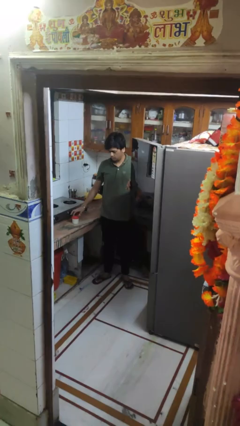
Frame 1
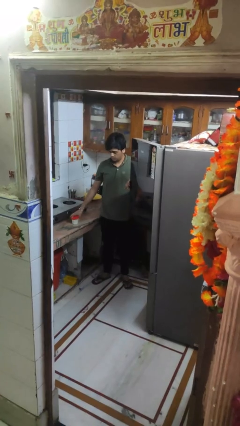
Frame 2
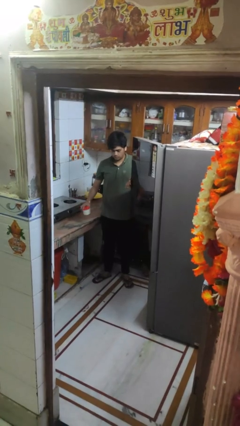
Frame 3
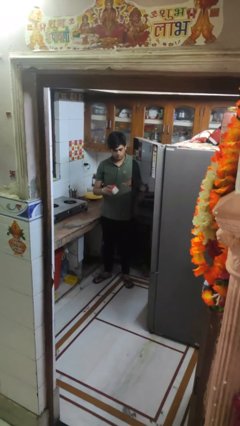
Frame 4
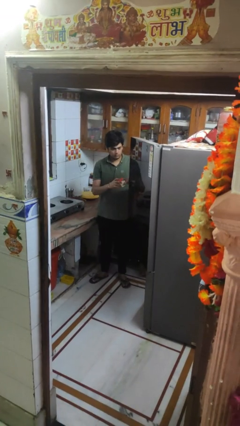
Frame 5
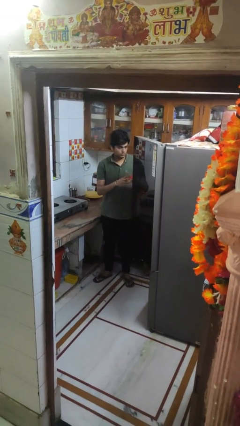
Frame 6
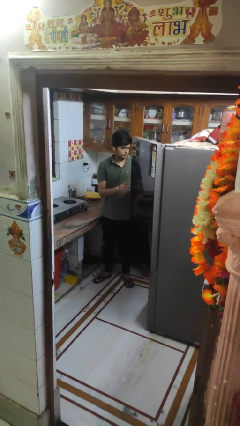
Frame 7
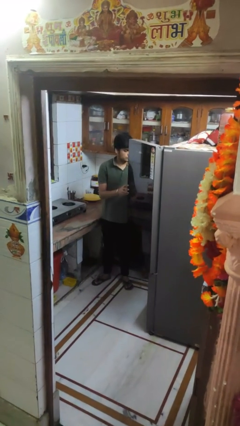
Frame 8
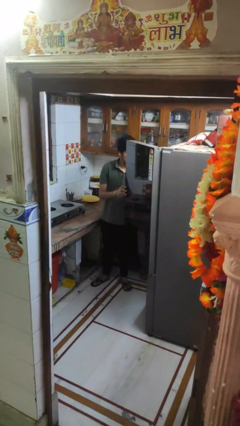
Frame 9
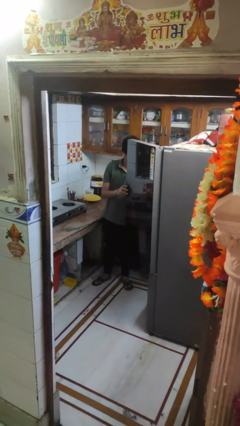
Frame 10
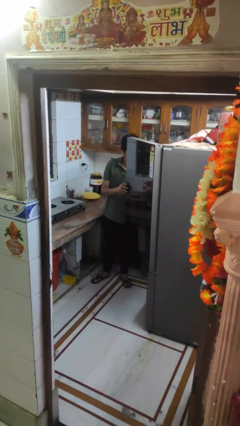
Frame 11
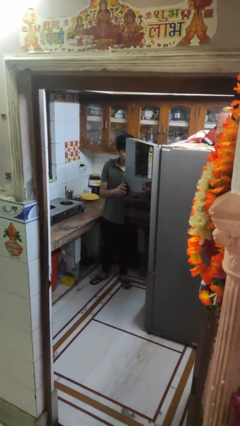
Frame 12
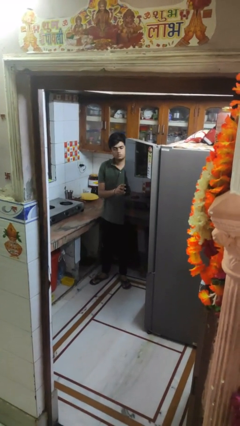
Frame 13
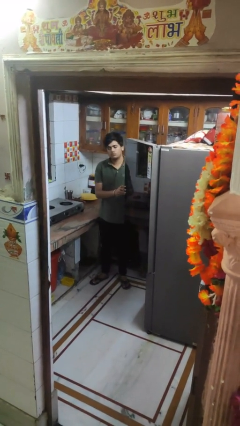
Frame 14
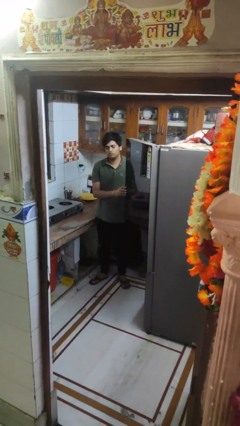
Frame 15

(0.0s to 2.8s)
person puts object into refrigerator

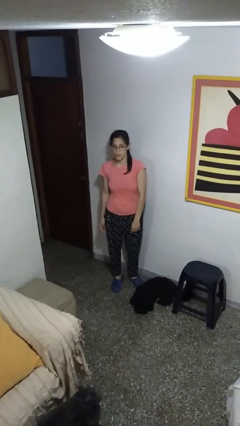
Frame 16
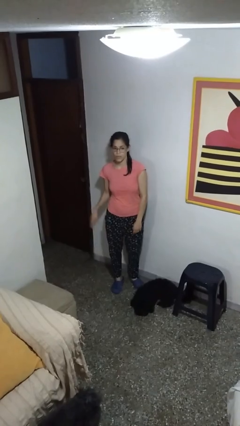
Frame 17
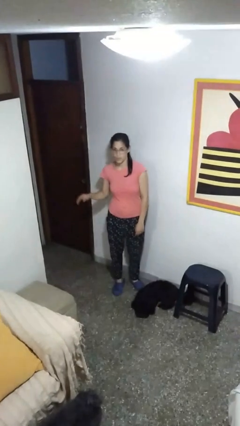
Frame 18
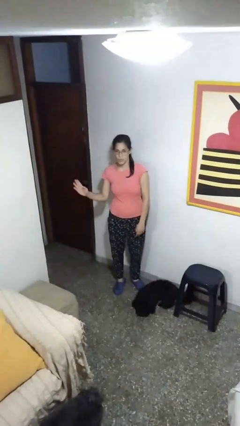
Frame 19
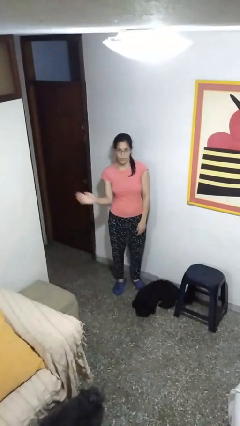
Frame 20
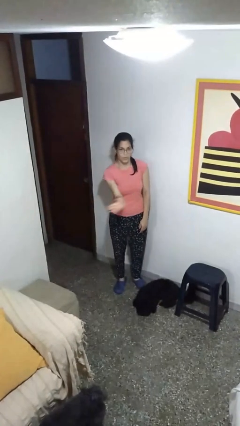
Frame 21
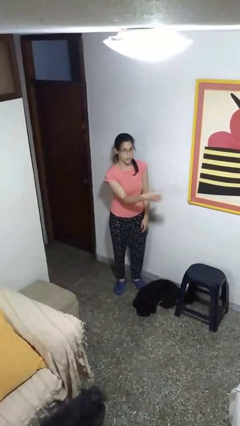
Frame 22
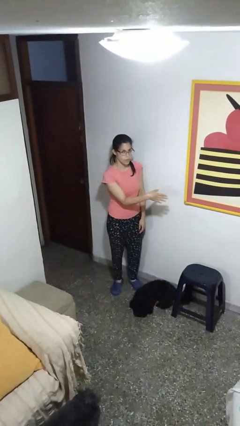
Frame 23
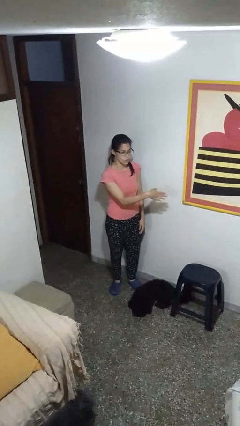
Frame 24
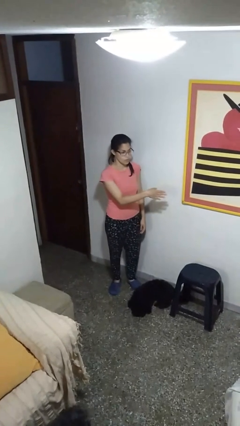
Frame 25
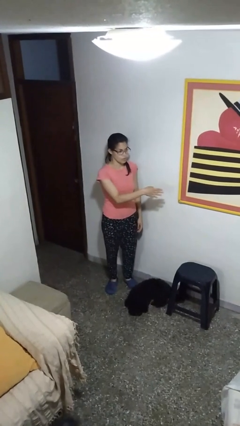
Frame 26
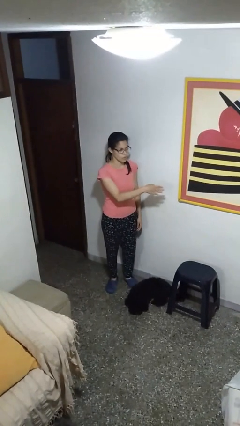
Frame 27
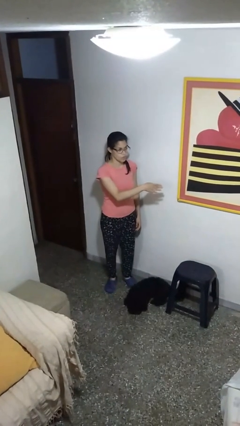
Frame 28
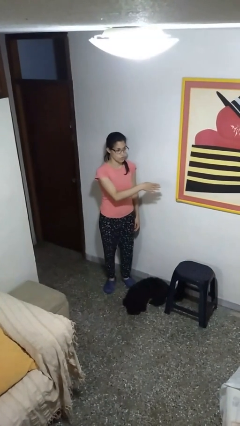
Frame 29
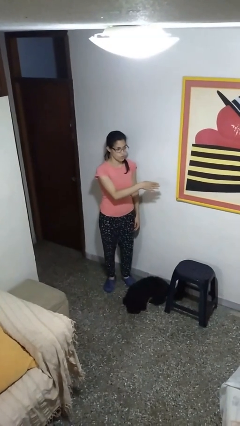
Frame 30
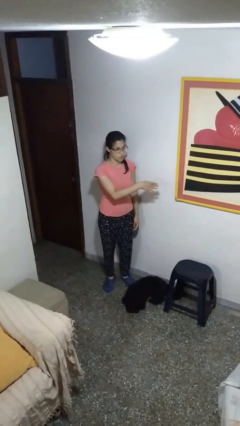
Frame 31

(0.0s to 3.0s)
person gestures swipe left

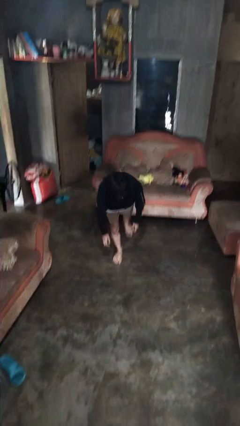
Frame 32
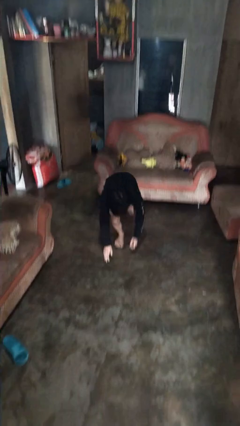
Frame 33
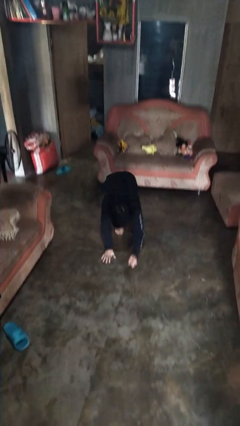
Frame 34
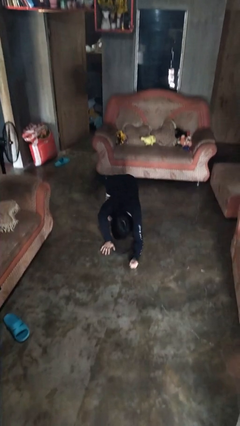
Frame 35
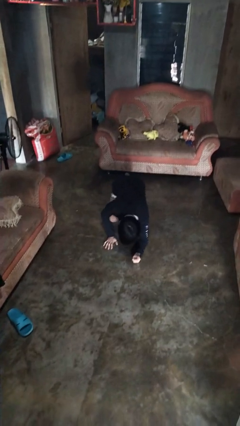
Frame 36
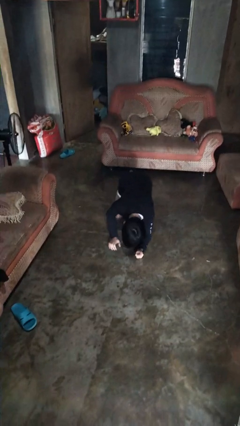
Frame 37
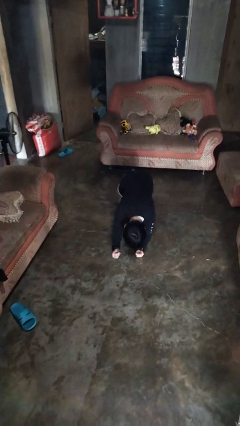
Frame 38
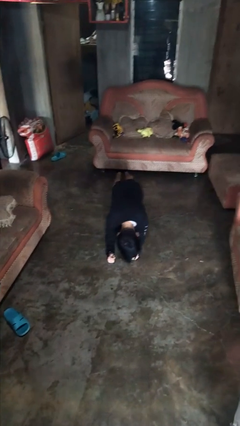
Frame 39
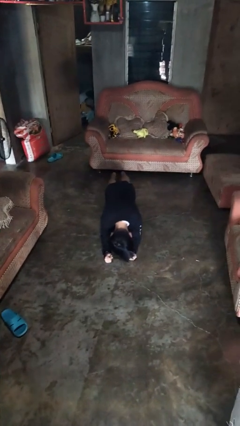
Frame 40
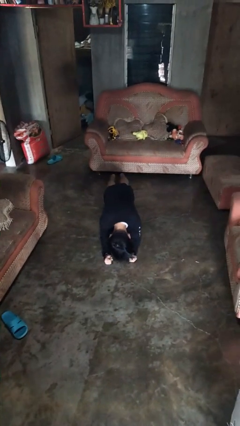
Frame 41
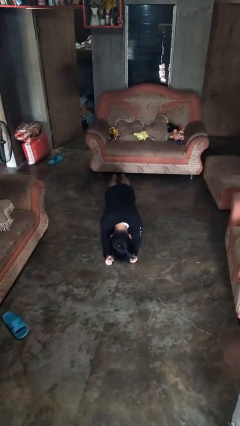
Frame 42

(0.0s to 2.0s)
person exercises with plank

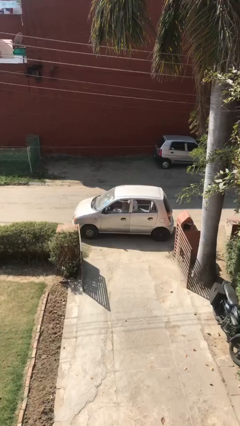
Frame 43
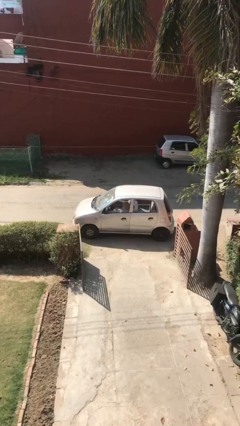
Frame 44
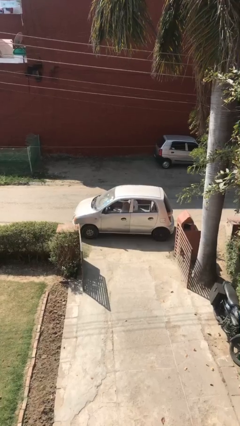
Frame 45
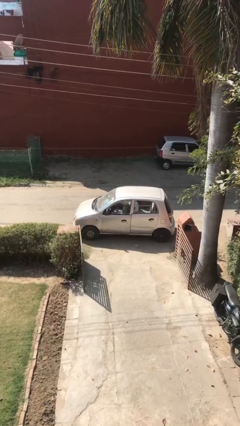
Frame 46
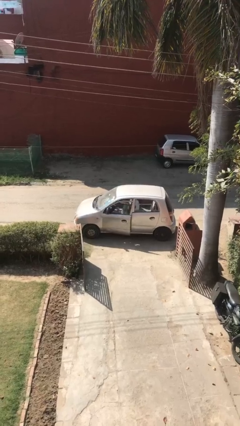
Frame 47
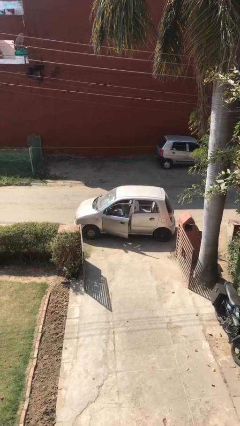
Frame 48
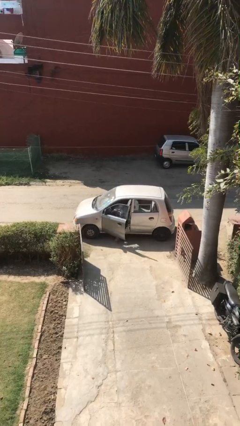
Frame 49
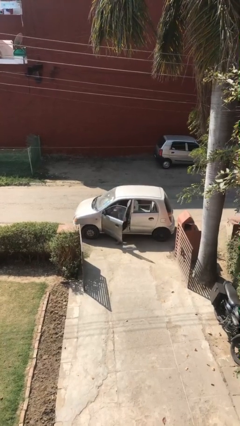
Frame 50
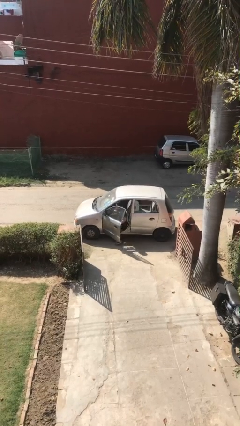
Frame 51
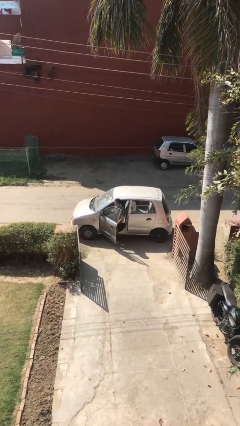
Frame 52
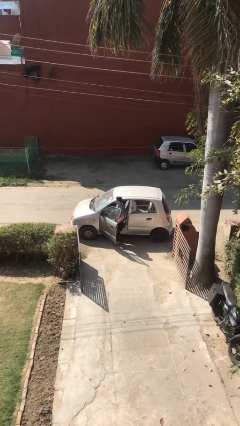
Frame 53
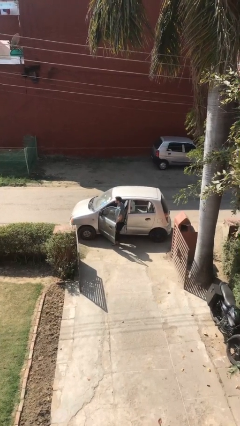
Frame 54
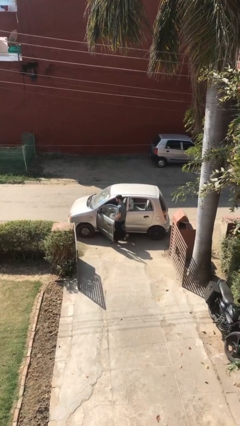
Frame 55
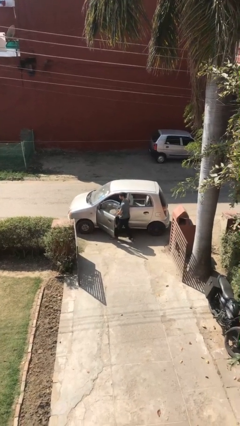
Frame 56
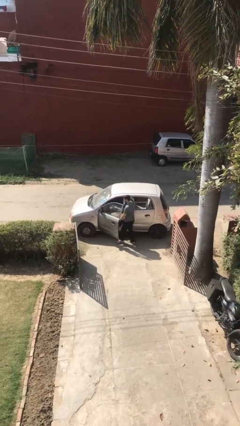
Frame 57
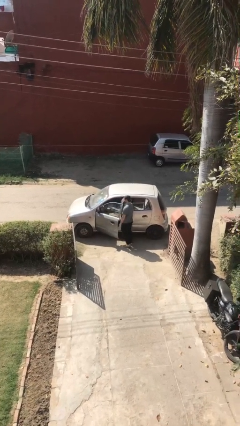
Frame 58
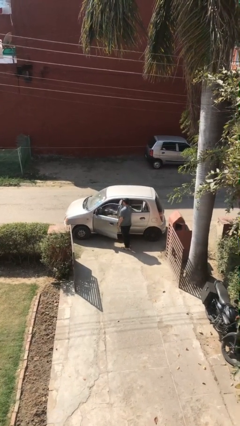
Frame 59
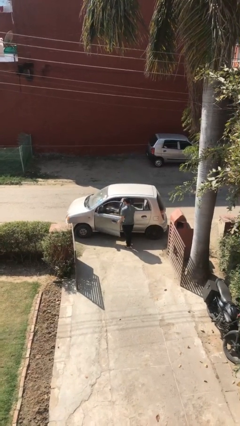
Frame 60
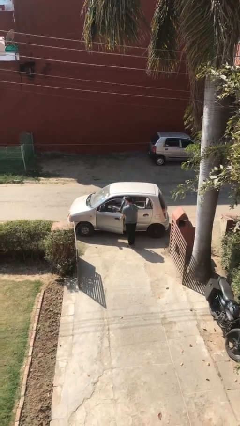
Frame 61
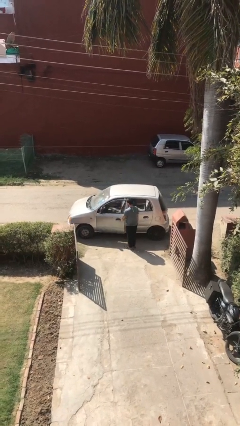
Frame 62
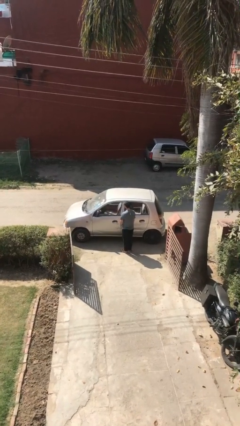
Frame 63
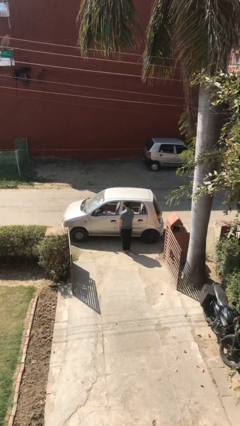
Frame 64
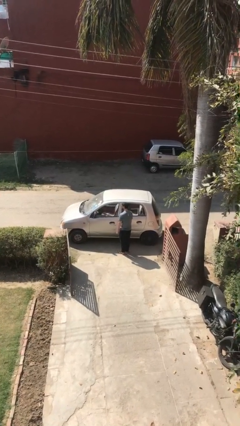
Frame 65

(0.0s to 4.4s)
car drops off person

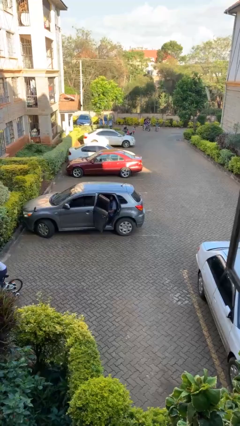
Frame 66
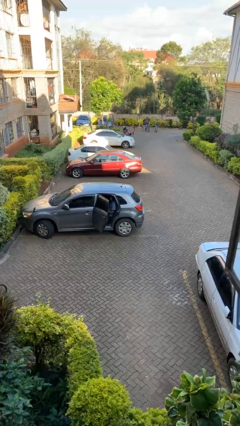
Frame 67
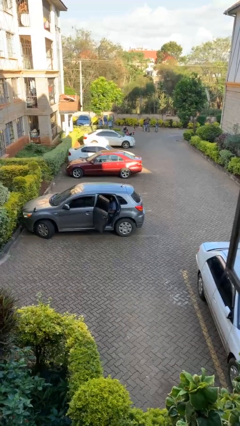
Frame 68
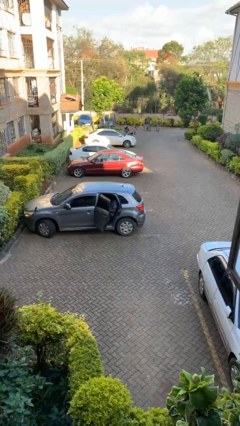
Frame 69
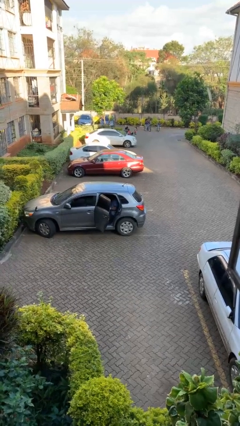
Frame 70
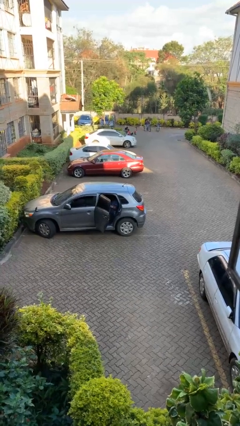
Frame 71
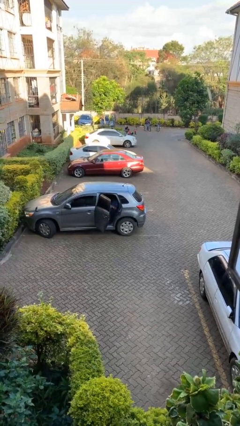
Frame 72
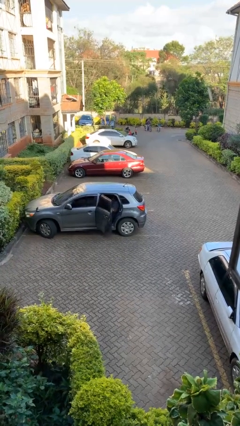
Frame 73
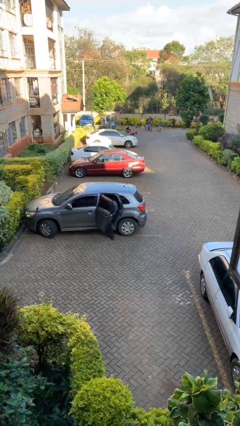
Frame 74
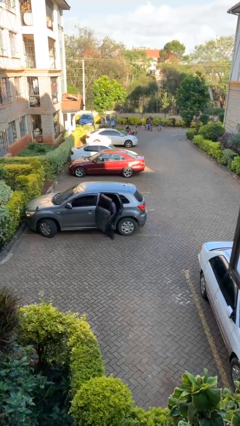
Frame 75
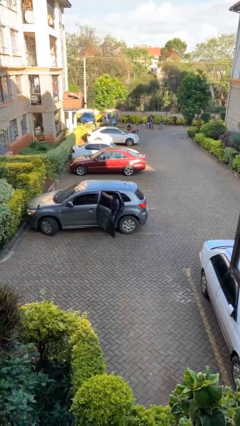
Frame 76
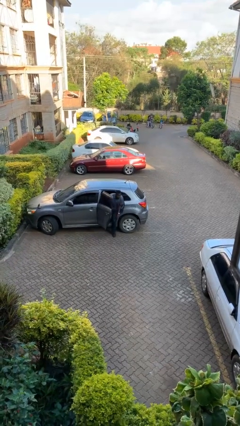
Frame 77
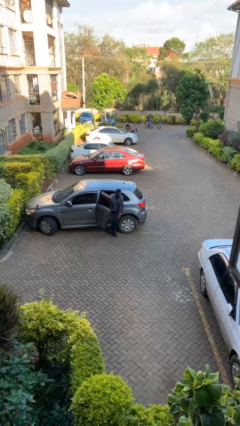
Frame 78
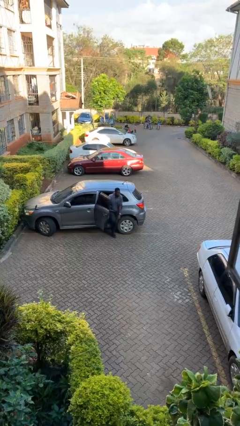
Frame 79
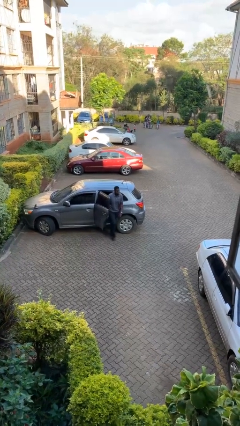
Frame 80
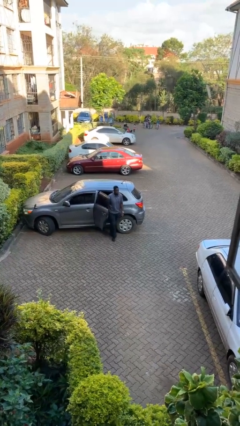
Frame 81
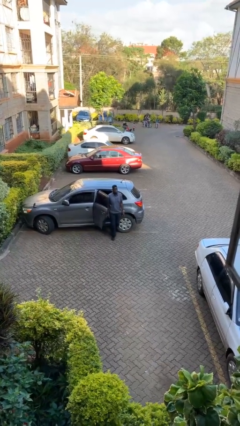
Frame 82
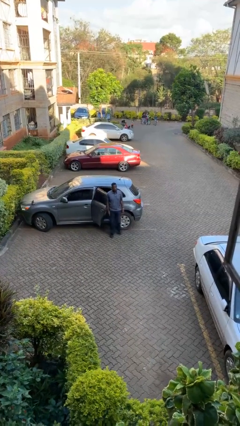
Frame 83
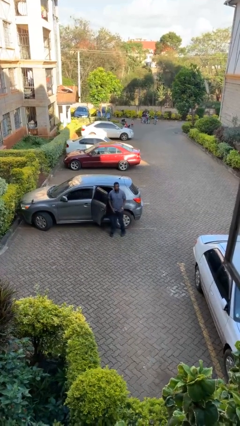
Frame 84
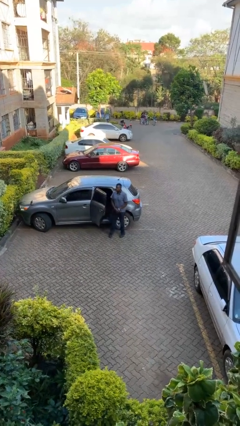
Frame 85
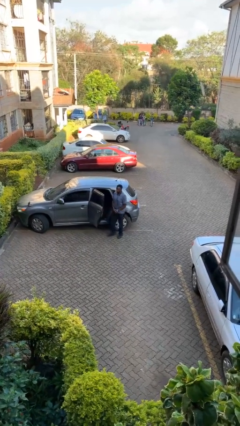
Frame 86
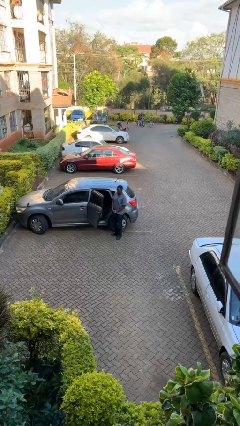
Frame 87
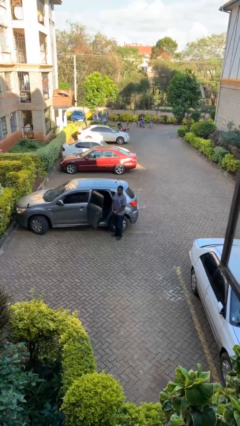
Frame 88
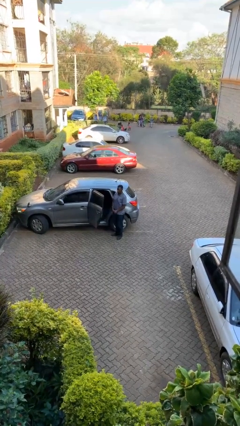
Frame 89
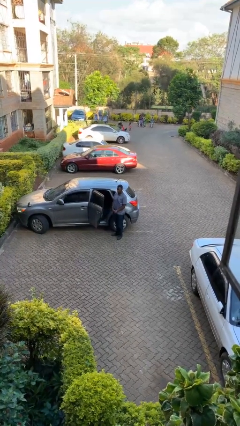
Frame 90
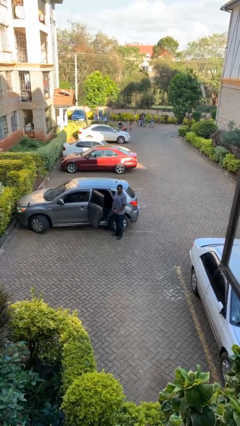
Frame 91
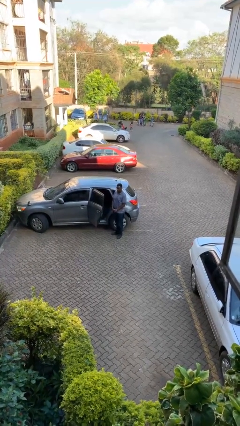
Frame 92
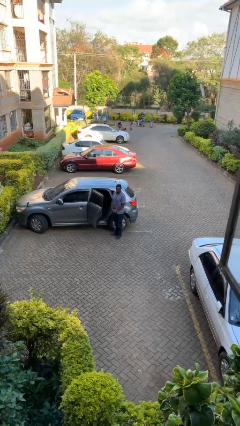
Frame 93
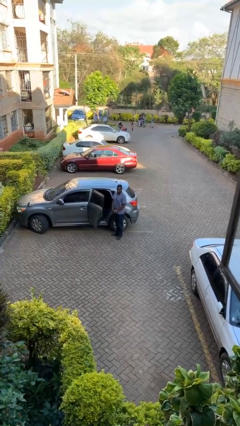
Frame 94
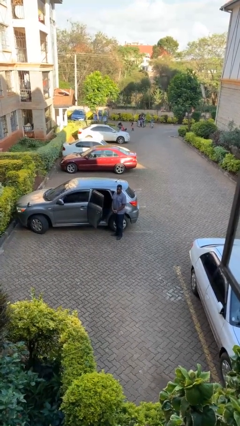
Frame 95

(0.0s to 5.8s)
person exits car
